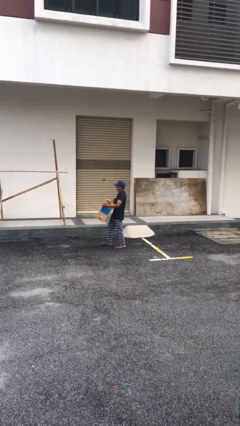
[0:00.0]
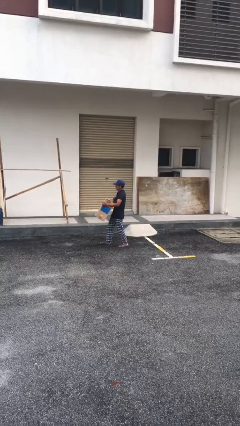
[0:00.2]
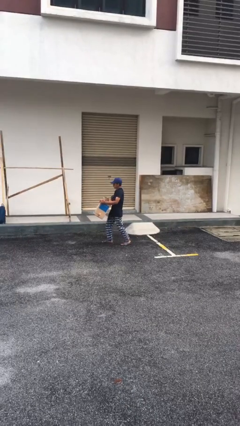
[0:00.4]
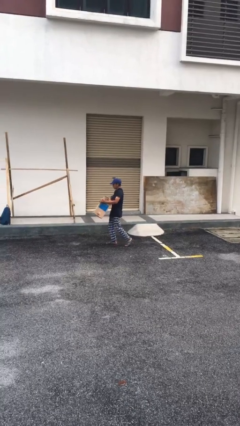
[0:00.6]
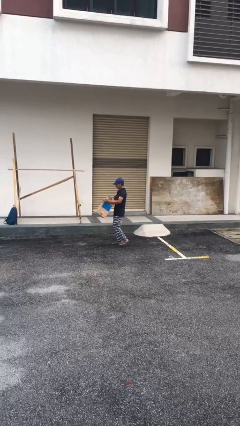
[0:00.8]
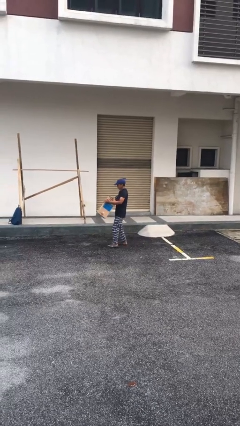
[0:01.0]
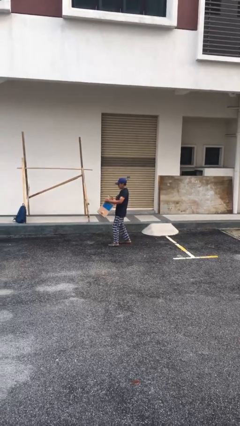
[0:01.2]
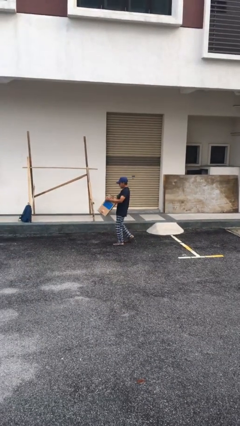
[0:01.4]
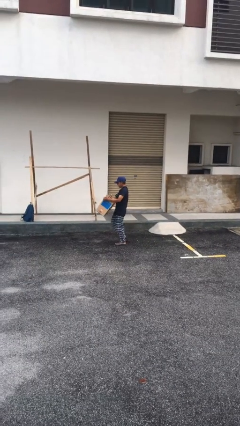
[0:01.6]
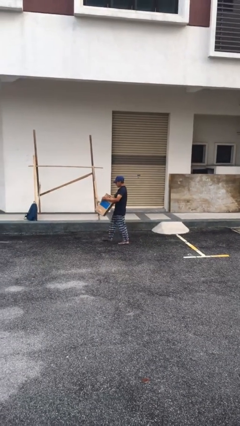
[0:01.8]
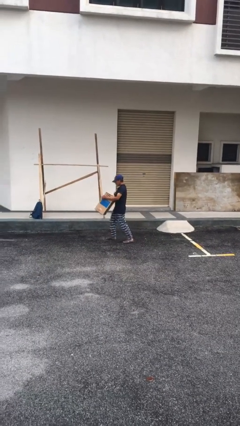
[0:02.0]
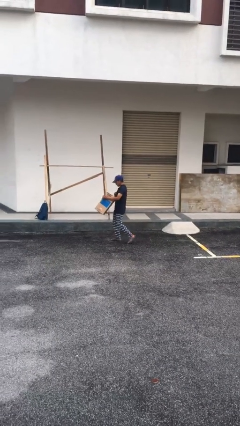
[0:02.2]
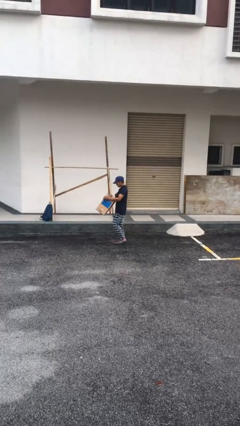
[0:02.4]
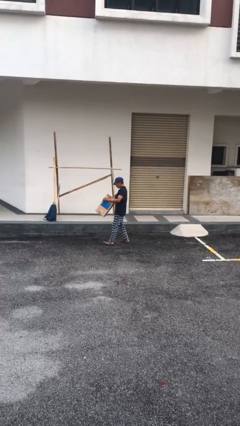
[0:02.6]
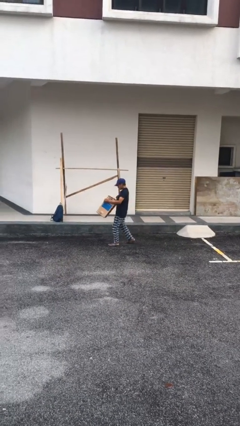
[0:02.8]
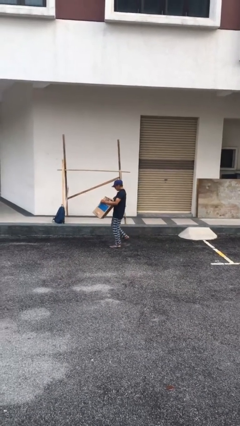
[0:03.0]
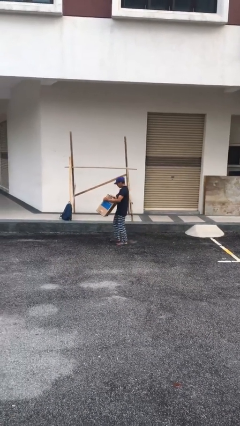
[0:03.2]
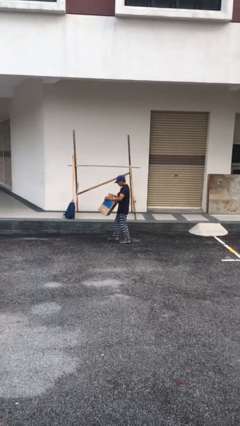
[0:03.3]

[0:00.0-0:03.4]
person carries heavy object

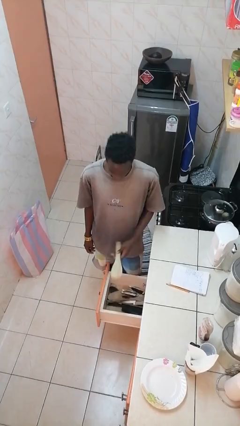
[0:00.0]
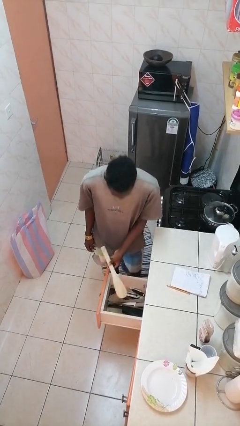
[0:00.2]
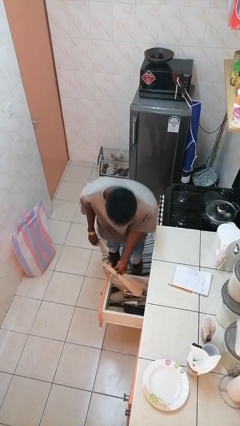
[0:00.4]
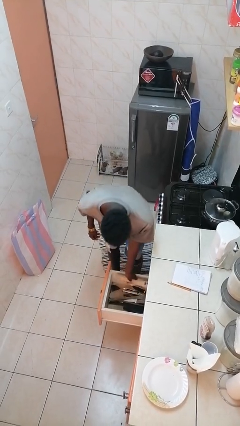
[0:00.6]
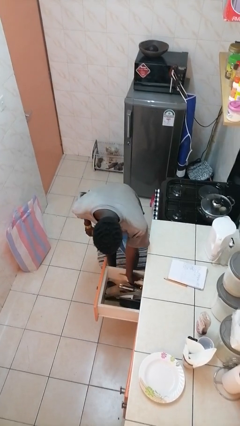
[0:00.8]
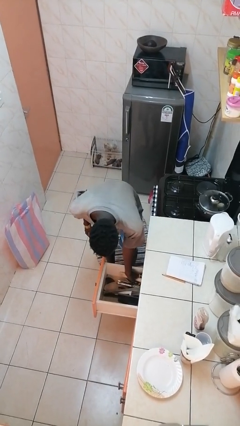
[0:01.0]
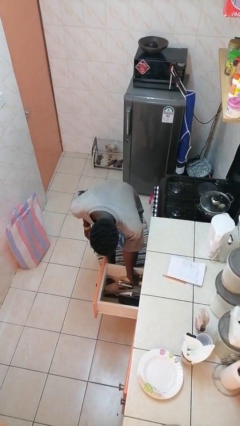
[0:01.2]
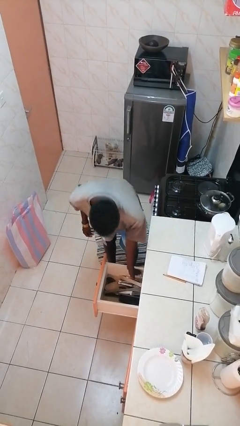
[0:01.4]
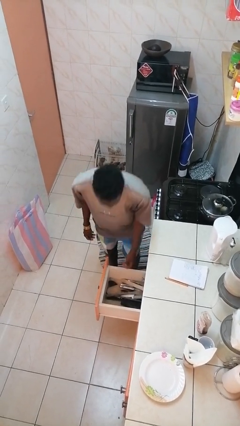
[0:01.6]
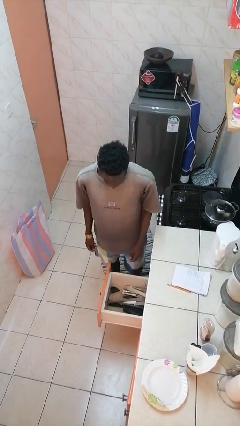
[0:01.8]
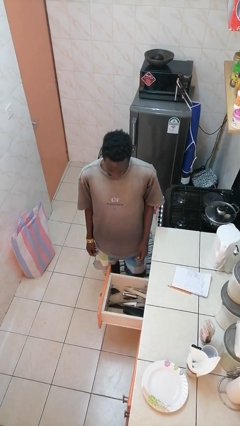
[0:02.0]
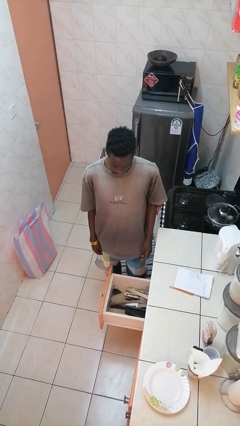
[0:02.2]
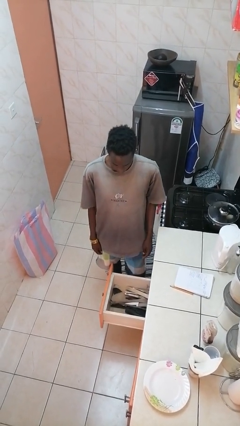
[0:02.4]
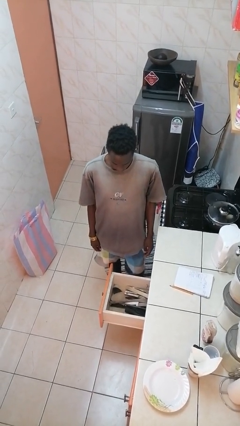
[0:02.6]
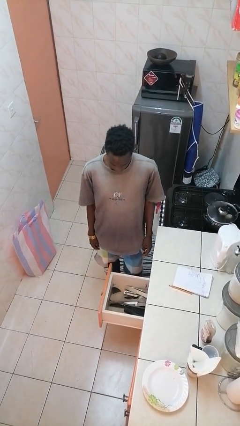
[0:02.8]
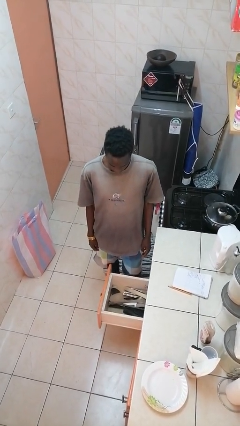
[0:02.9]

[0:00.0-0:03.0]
person puts object into kitchen drawer

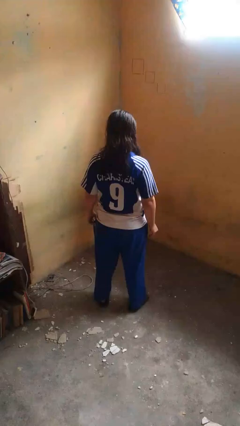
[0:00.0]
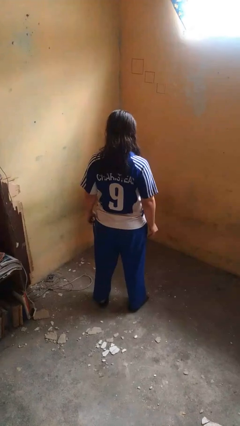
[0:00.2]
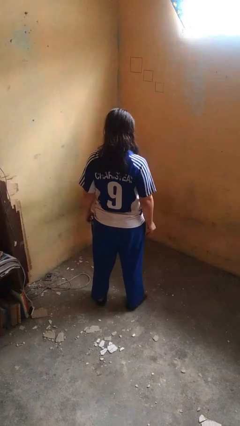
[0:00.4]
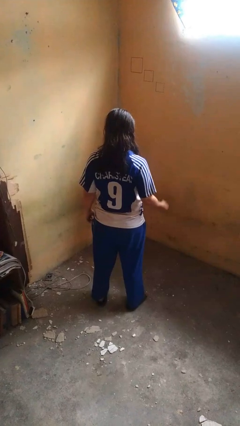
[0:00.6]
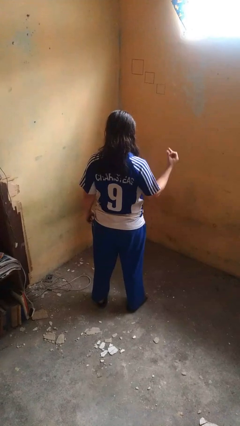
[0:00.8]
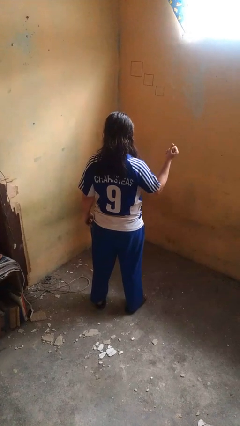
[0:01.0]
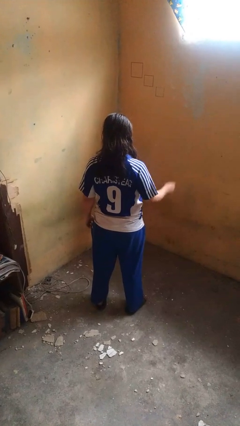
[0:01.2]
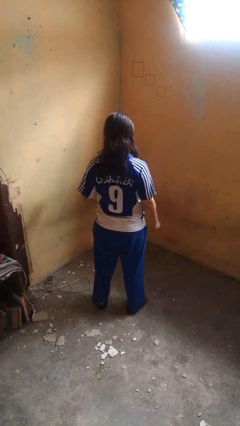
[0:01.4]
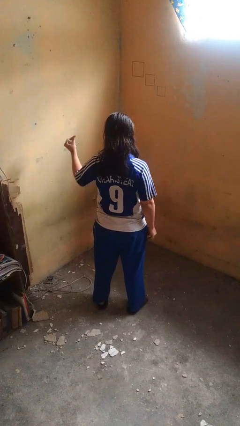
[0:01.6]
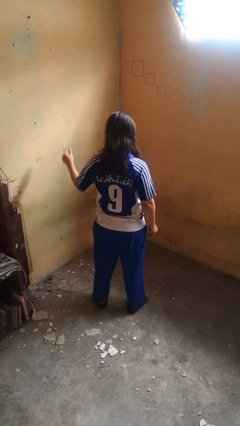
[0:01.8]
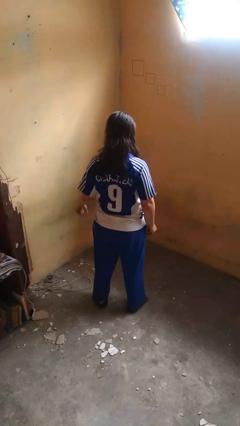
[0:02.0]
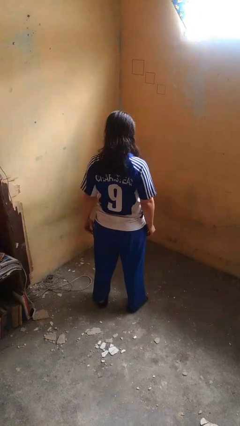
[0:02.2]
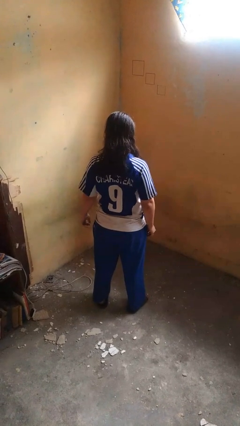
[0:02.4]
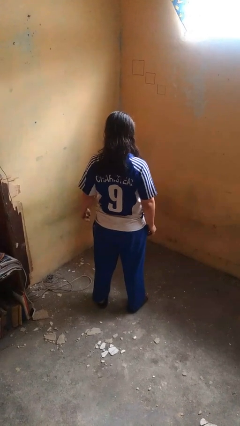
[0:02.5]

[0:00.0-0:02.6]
person snaps fingers

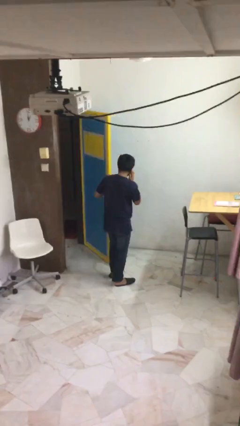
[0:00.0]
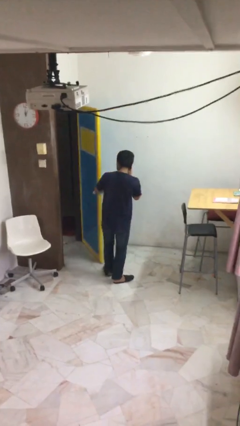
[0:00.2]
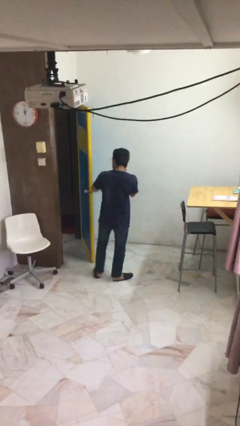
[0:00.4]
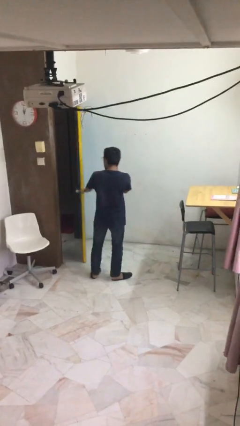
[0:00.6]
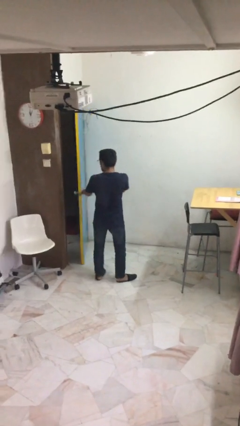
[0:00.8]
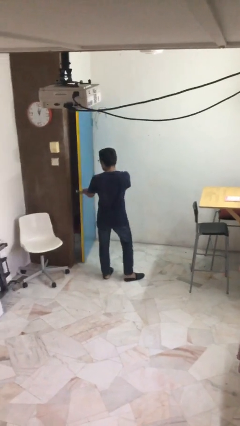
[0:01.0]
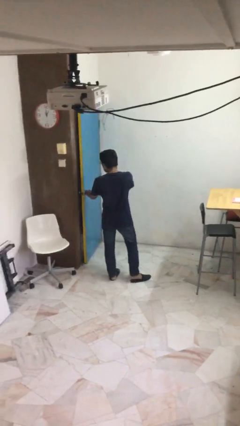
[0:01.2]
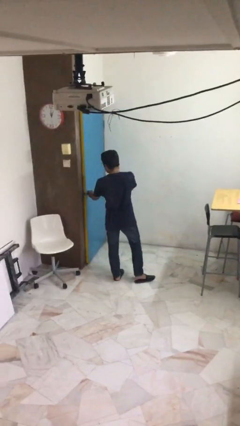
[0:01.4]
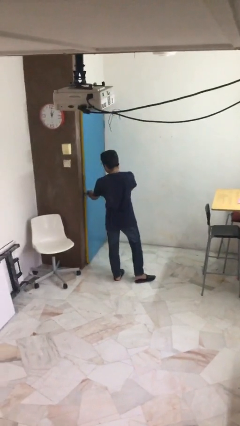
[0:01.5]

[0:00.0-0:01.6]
person closes facility door

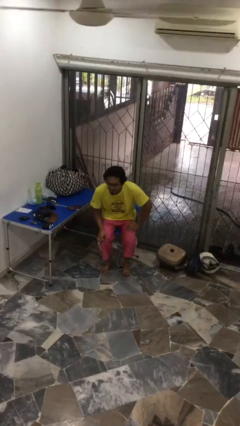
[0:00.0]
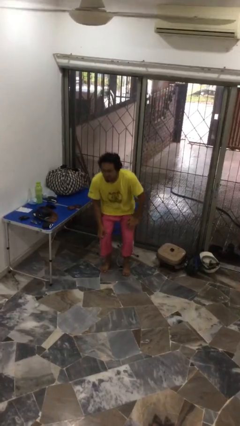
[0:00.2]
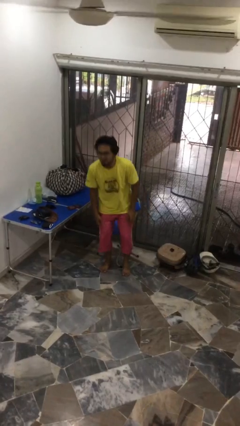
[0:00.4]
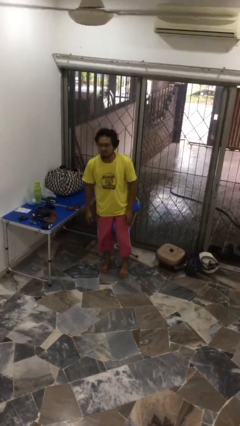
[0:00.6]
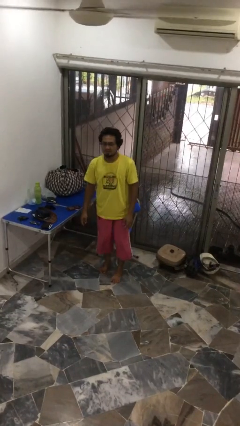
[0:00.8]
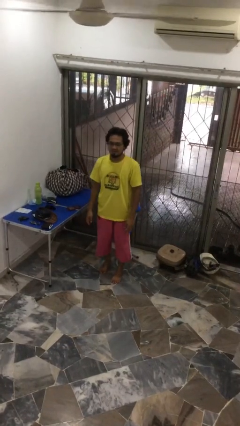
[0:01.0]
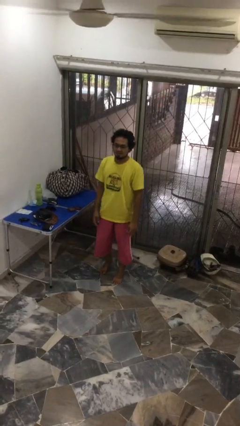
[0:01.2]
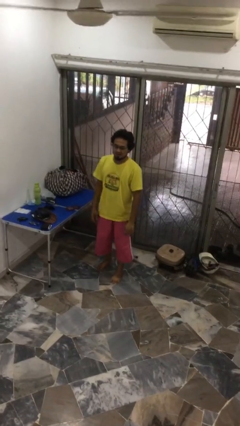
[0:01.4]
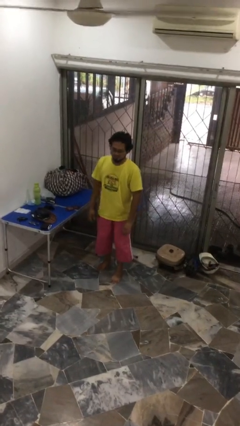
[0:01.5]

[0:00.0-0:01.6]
person stands up

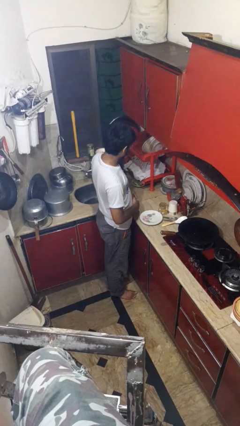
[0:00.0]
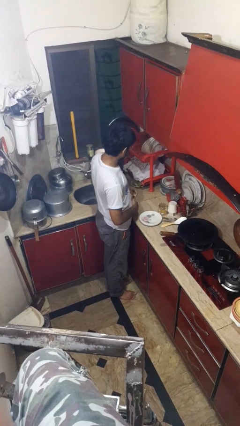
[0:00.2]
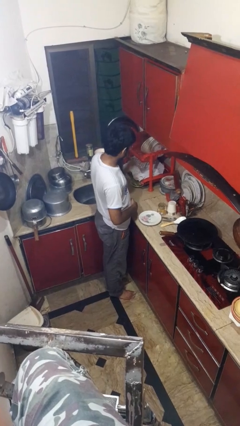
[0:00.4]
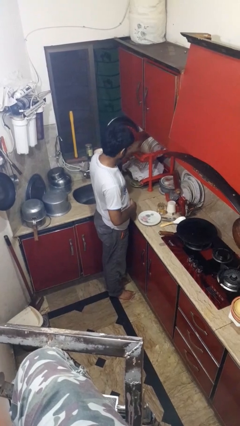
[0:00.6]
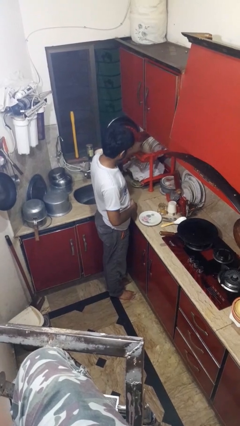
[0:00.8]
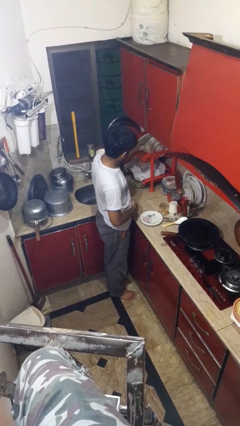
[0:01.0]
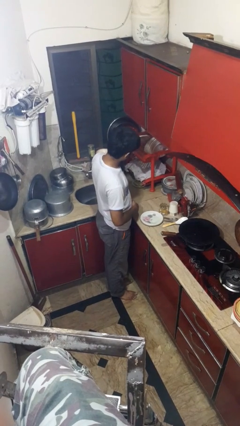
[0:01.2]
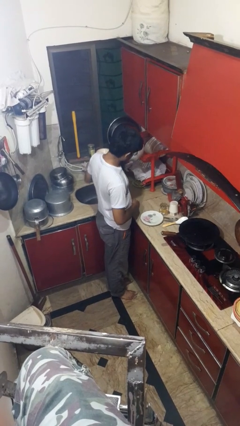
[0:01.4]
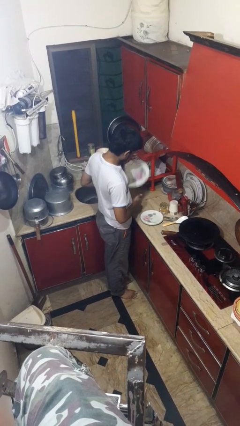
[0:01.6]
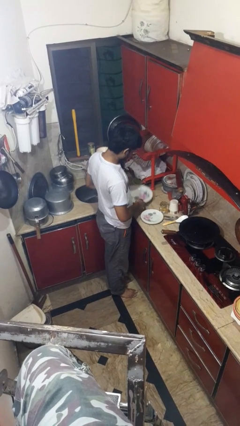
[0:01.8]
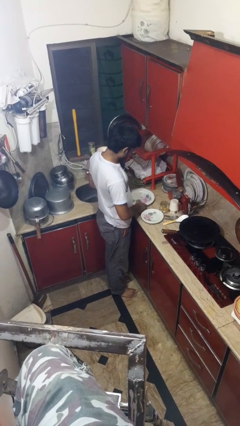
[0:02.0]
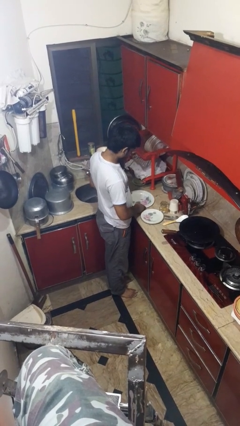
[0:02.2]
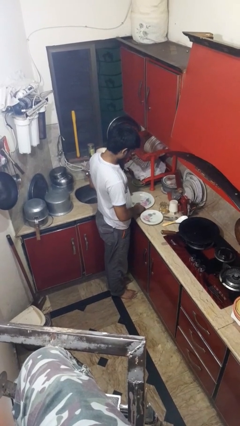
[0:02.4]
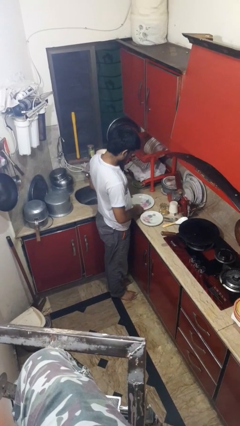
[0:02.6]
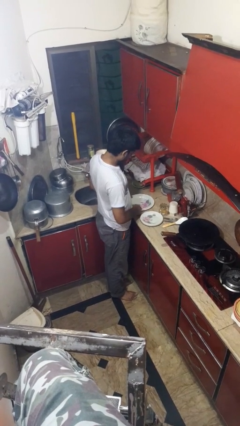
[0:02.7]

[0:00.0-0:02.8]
person unloads dishwasher

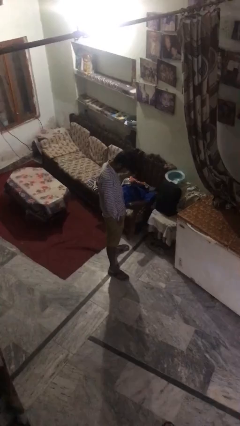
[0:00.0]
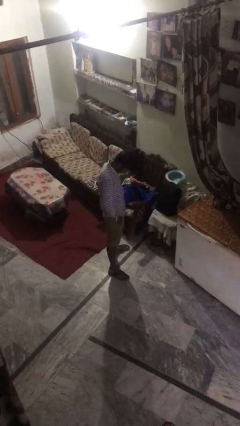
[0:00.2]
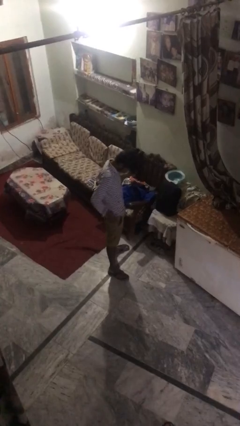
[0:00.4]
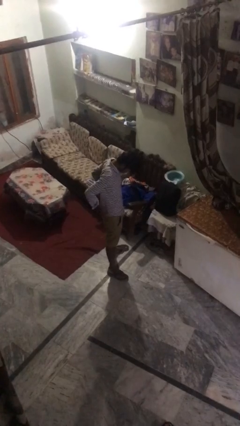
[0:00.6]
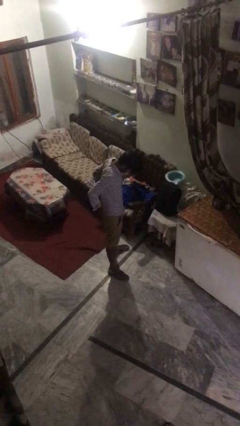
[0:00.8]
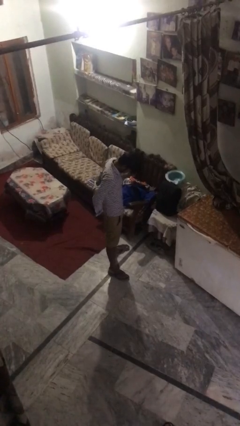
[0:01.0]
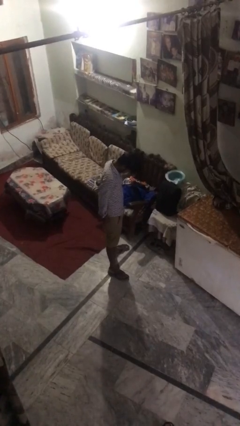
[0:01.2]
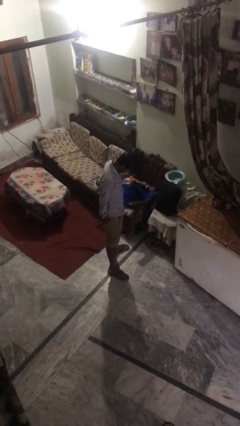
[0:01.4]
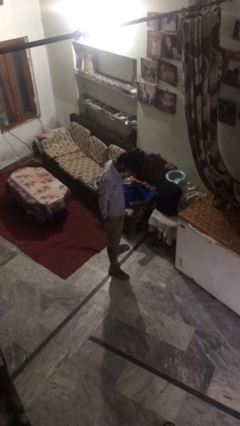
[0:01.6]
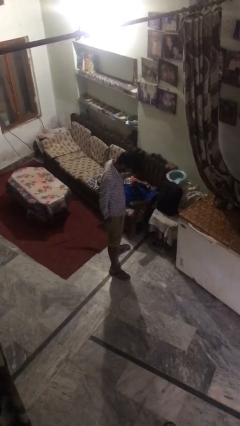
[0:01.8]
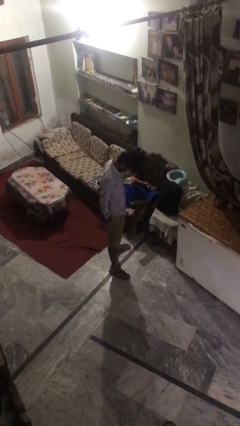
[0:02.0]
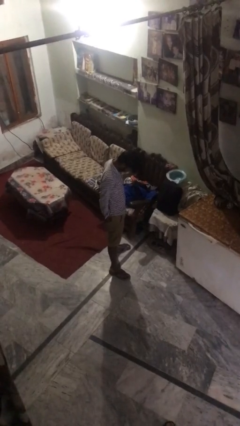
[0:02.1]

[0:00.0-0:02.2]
person puts hands in back pockets
